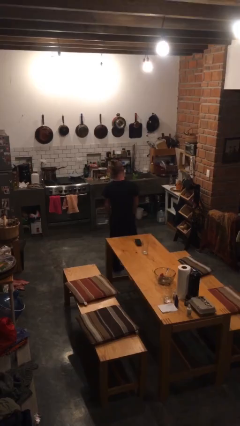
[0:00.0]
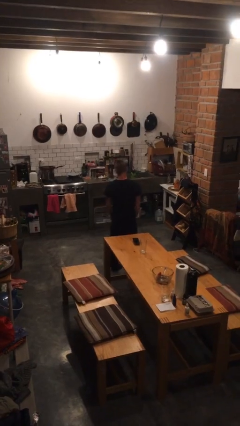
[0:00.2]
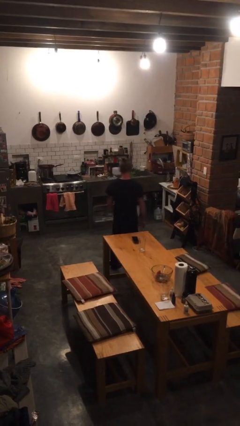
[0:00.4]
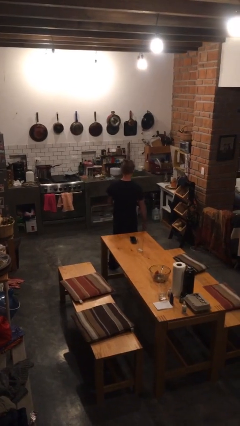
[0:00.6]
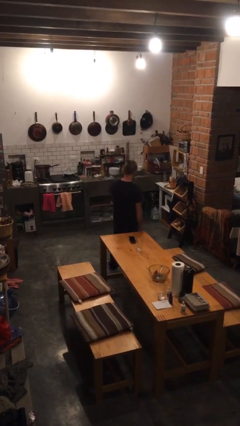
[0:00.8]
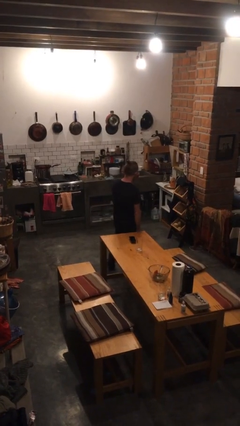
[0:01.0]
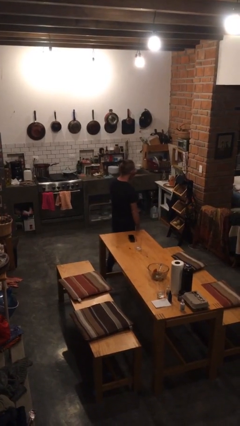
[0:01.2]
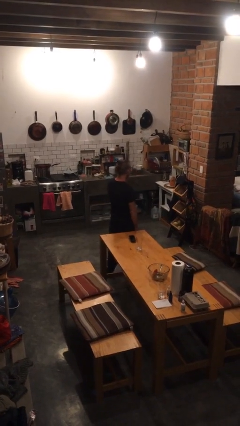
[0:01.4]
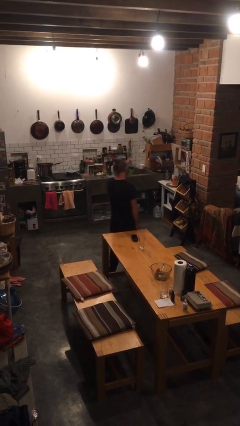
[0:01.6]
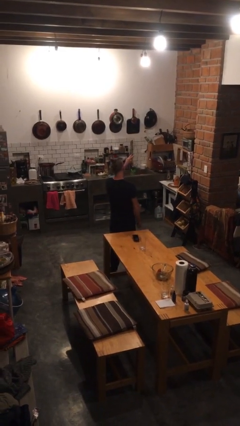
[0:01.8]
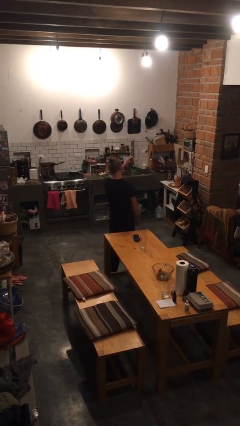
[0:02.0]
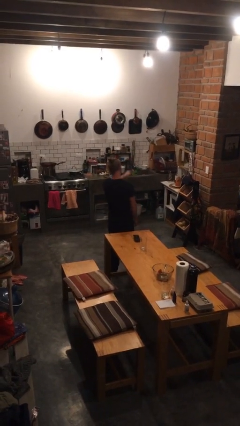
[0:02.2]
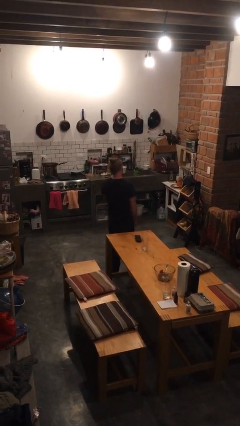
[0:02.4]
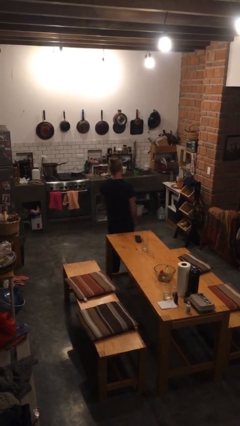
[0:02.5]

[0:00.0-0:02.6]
person gestures watch closely

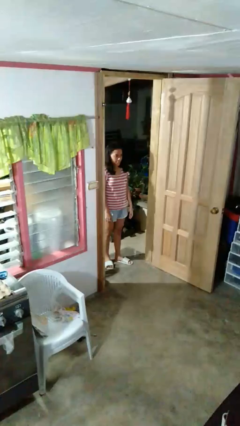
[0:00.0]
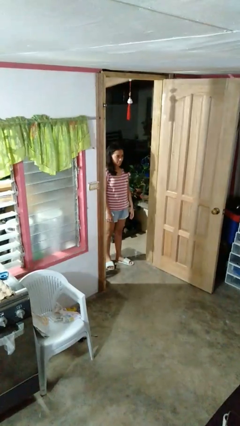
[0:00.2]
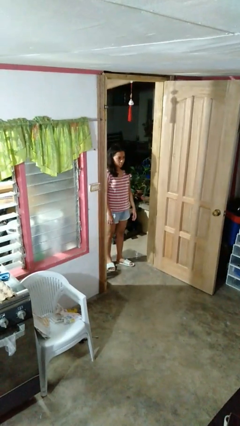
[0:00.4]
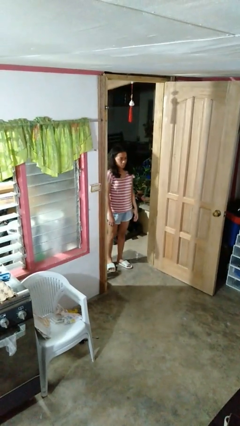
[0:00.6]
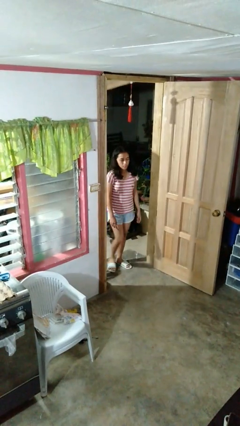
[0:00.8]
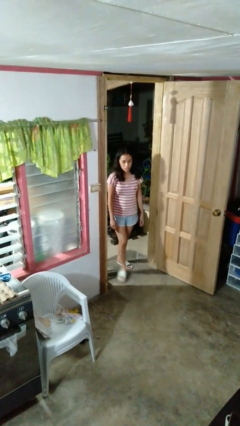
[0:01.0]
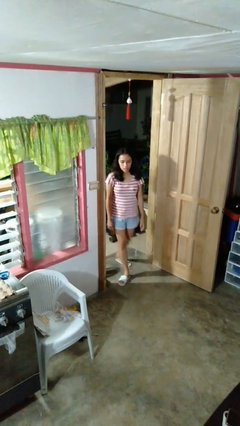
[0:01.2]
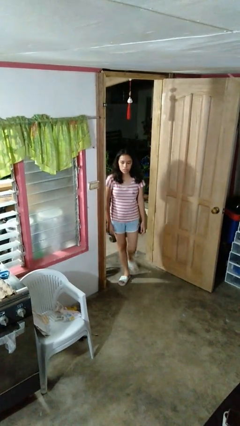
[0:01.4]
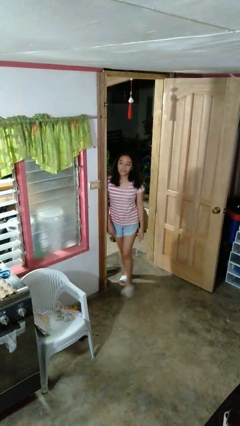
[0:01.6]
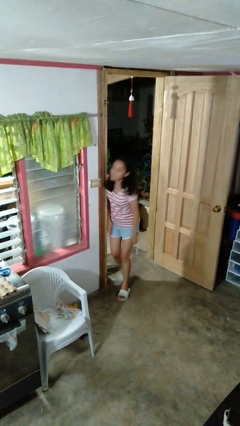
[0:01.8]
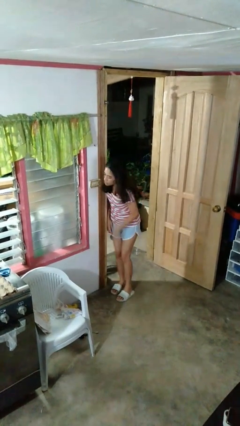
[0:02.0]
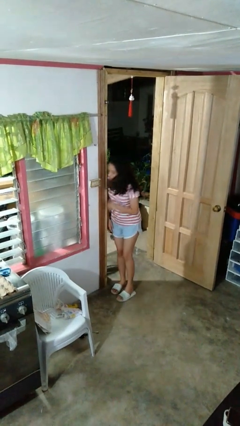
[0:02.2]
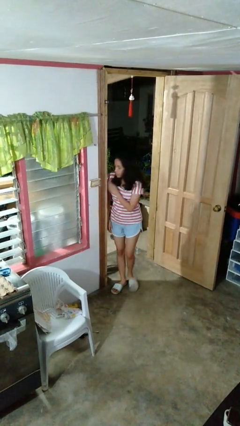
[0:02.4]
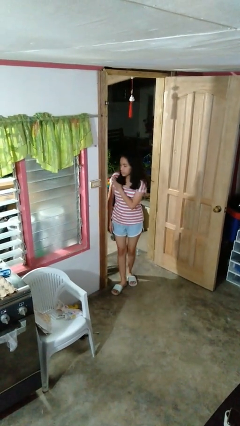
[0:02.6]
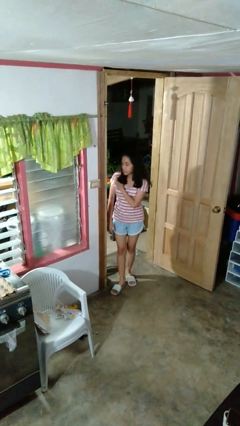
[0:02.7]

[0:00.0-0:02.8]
person bumps into wall

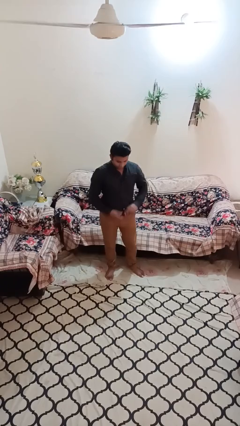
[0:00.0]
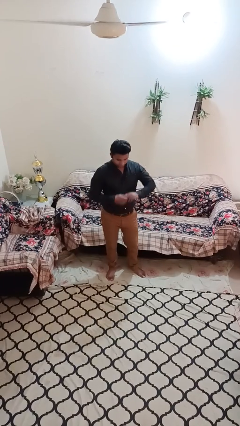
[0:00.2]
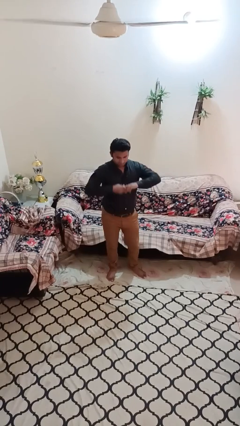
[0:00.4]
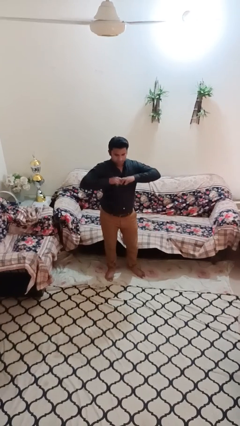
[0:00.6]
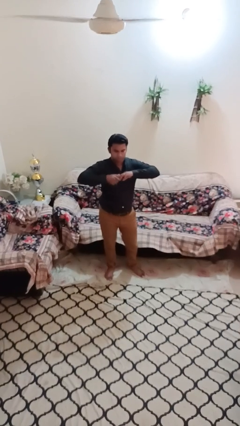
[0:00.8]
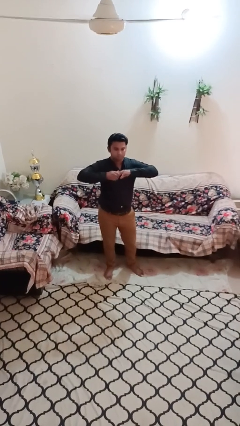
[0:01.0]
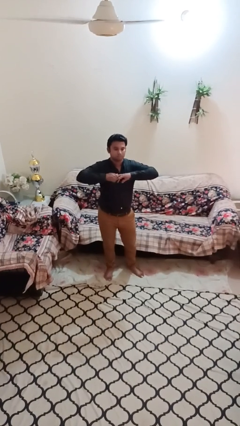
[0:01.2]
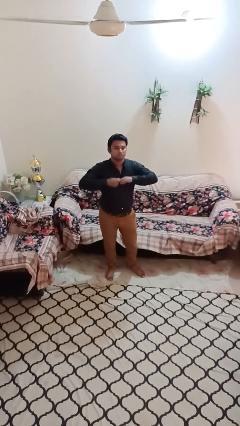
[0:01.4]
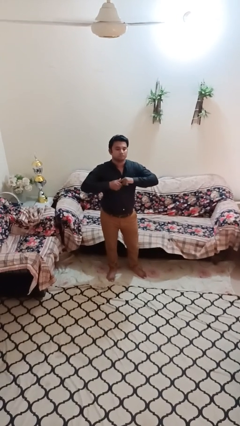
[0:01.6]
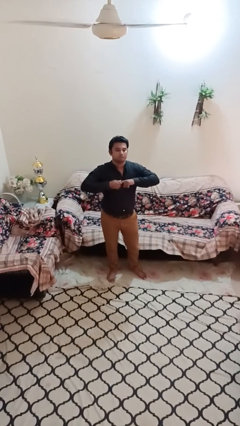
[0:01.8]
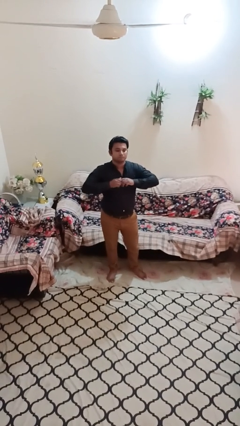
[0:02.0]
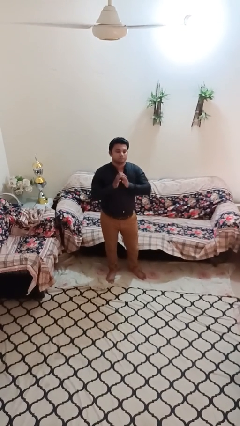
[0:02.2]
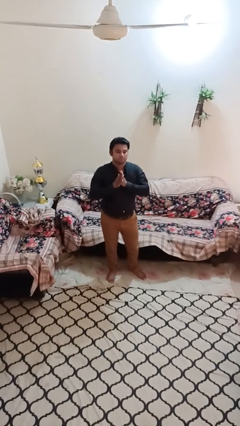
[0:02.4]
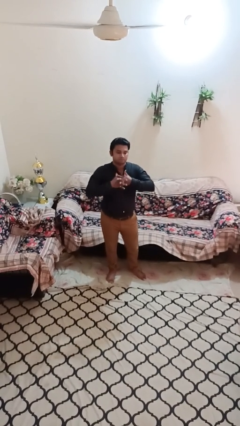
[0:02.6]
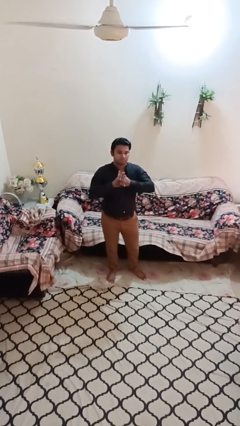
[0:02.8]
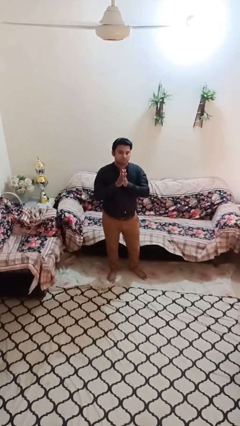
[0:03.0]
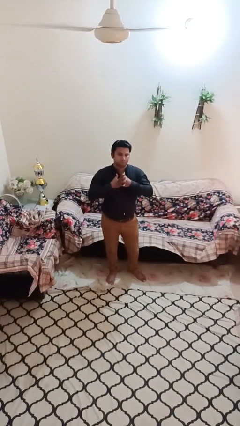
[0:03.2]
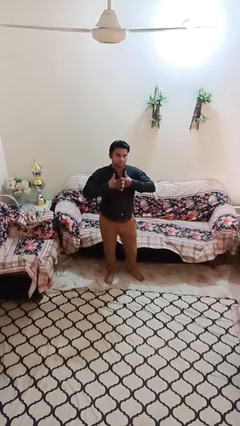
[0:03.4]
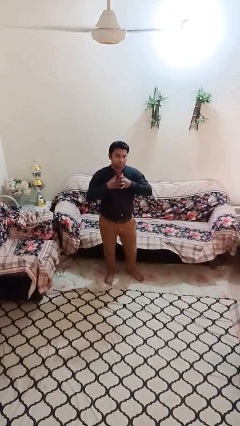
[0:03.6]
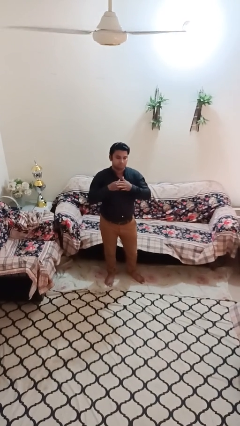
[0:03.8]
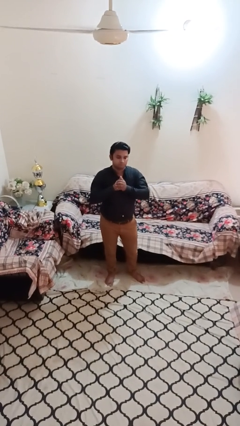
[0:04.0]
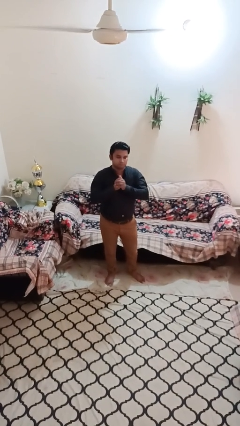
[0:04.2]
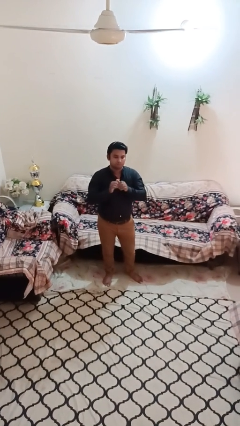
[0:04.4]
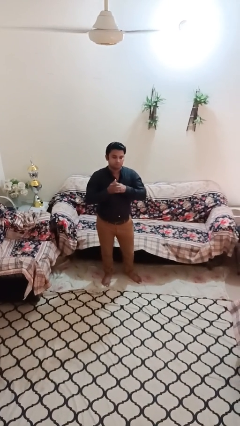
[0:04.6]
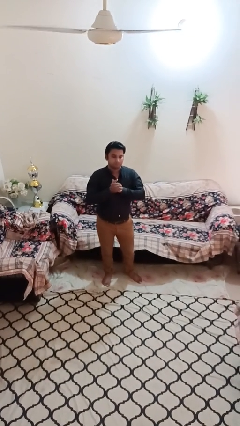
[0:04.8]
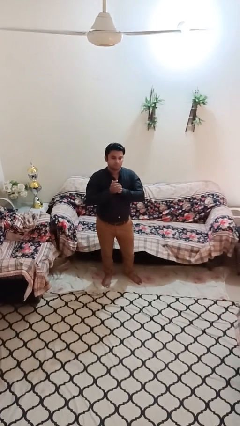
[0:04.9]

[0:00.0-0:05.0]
person cracks knuckles

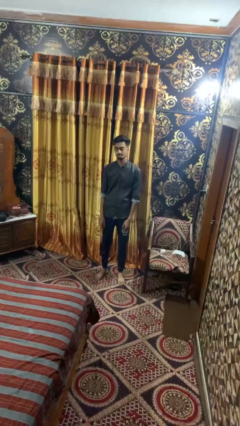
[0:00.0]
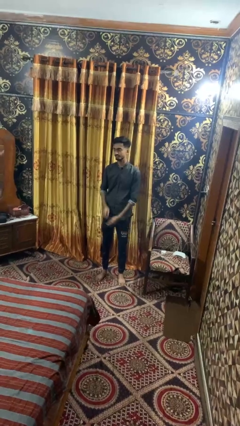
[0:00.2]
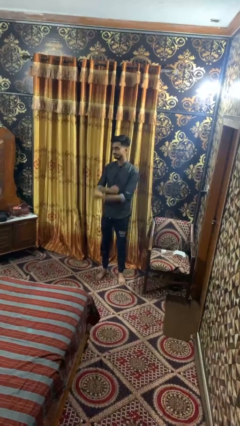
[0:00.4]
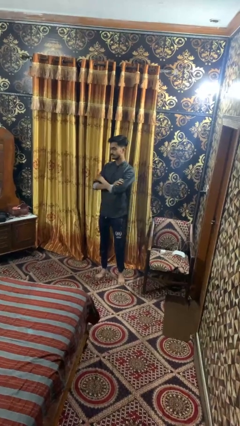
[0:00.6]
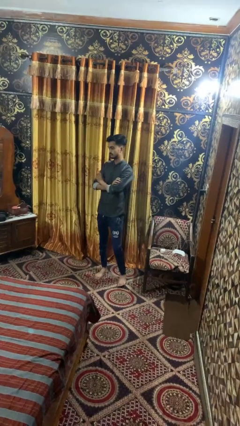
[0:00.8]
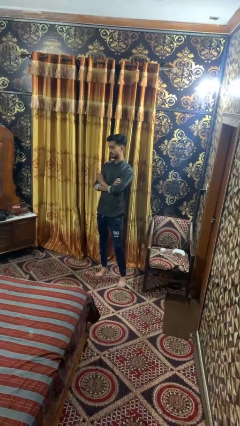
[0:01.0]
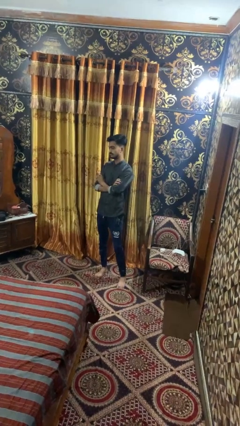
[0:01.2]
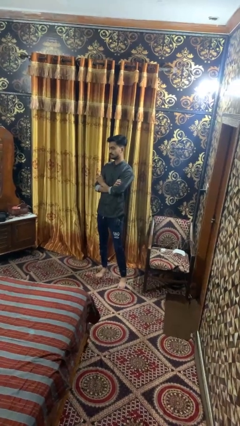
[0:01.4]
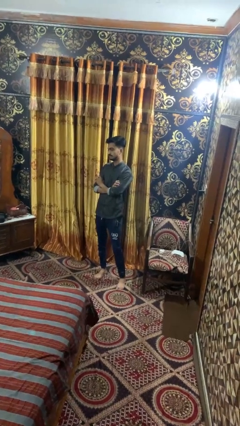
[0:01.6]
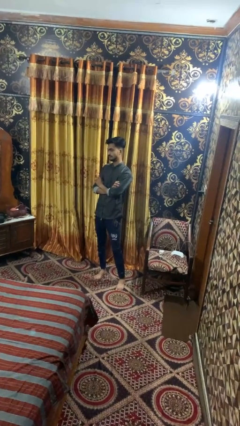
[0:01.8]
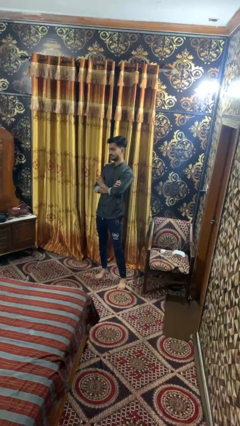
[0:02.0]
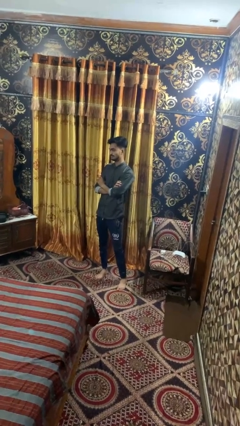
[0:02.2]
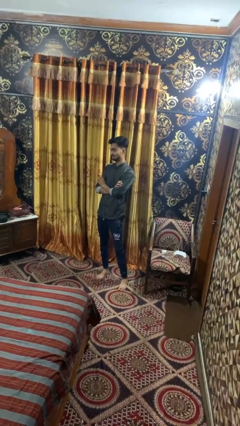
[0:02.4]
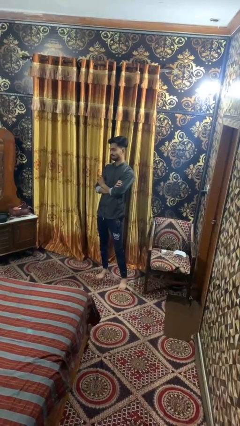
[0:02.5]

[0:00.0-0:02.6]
person crosses arms

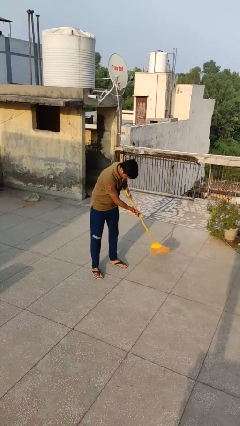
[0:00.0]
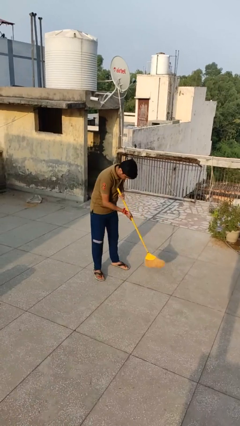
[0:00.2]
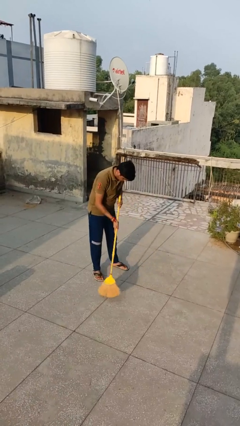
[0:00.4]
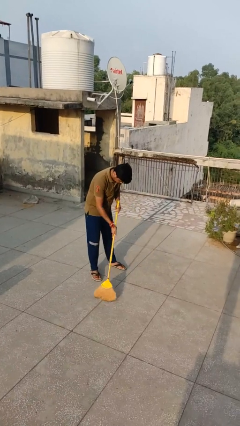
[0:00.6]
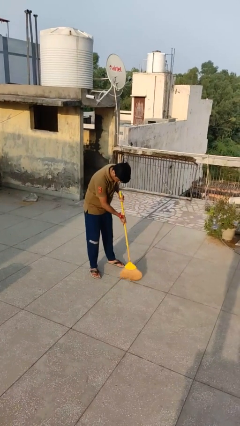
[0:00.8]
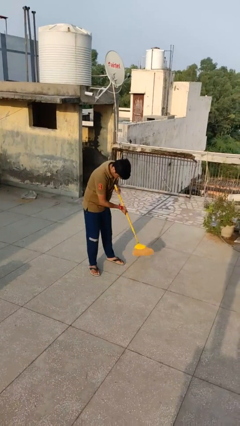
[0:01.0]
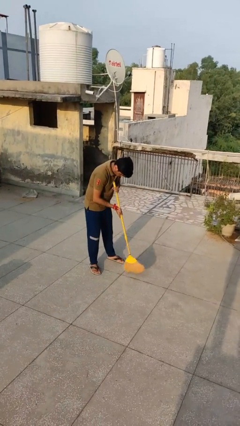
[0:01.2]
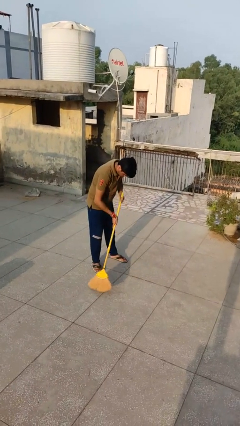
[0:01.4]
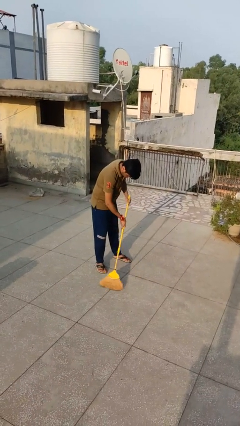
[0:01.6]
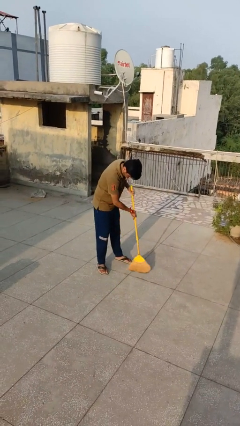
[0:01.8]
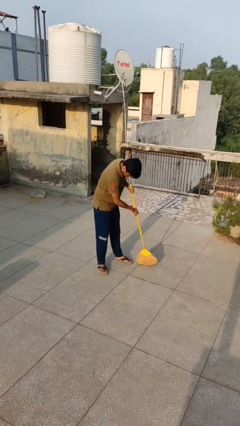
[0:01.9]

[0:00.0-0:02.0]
person sweeps floor

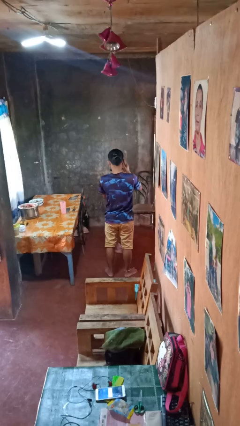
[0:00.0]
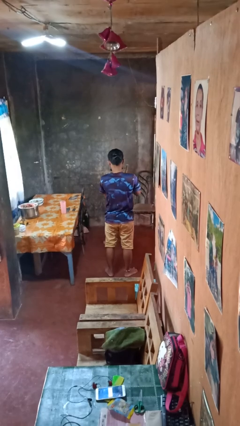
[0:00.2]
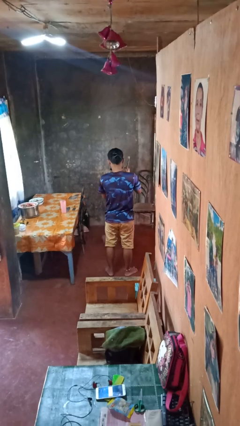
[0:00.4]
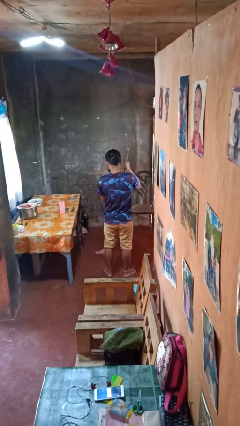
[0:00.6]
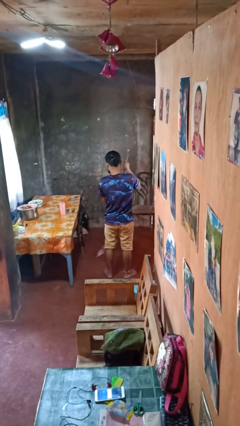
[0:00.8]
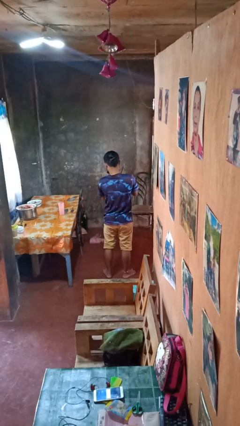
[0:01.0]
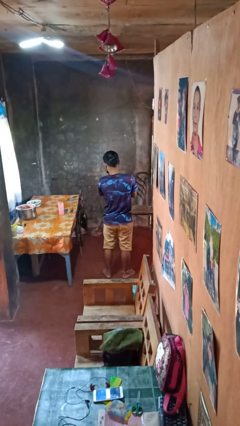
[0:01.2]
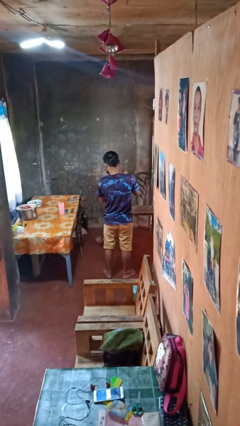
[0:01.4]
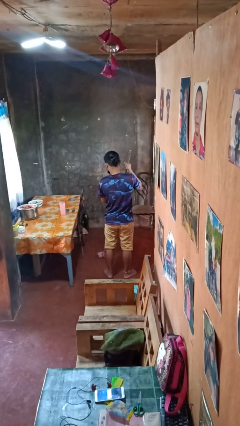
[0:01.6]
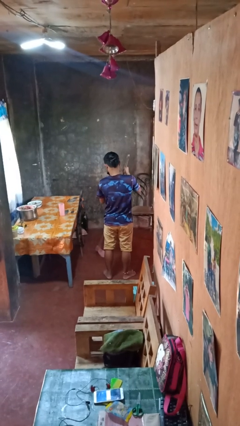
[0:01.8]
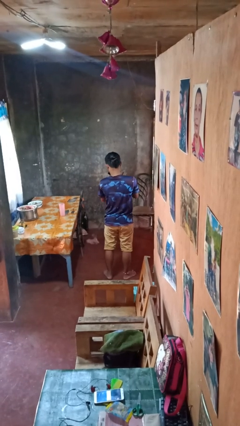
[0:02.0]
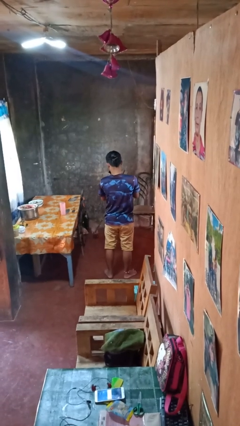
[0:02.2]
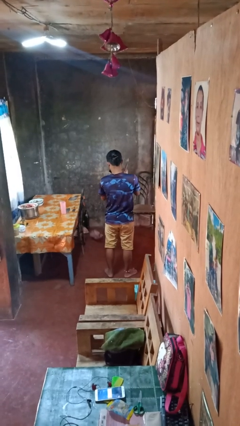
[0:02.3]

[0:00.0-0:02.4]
person mops
